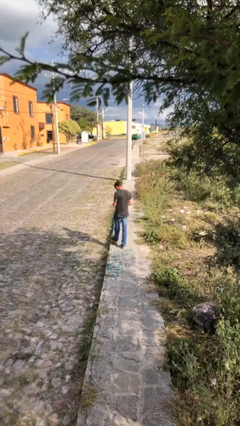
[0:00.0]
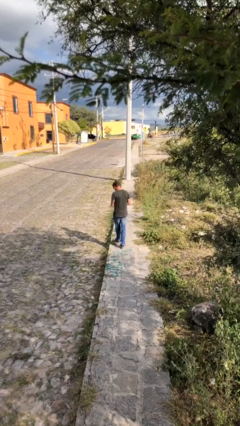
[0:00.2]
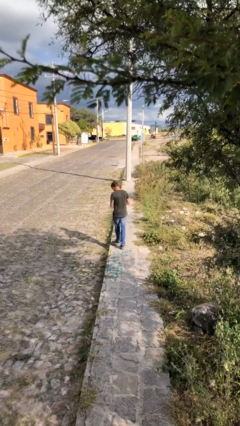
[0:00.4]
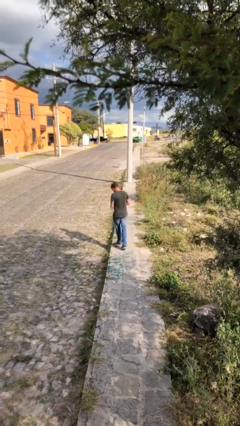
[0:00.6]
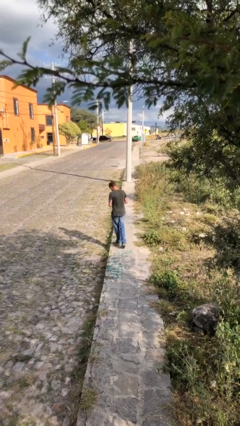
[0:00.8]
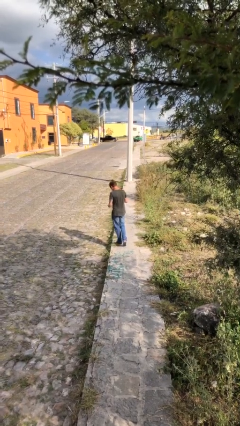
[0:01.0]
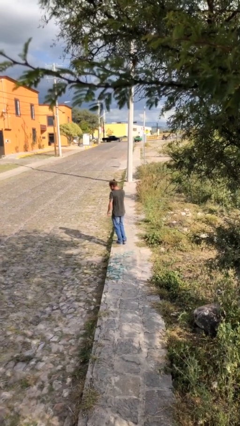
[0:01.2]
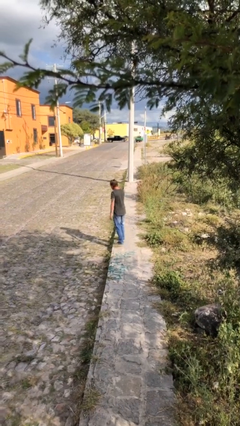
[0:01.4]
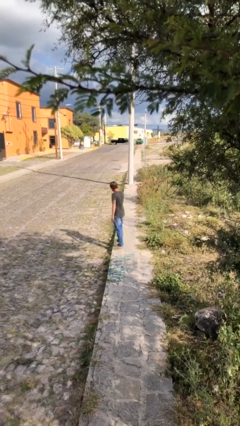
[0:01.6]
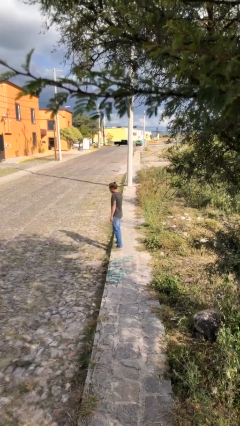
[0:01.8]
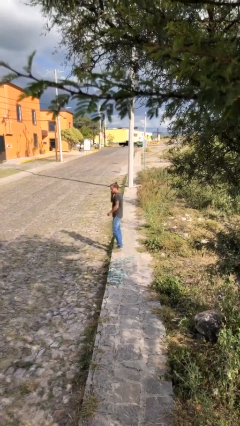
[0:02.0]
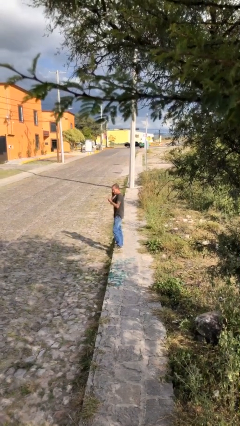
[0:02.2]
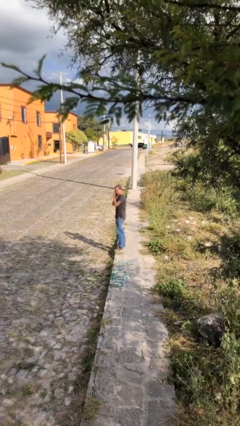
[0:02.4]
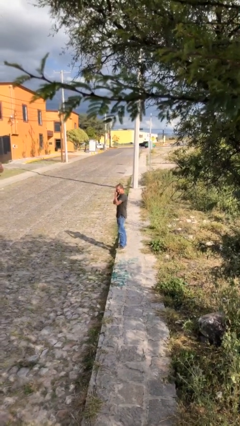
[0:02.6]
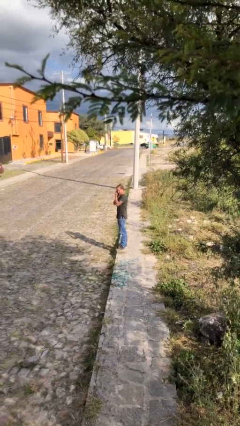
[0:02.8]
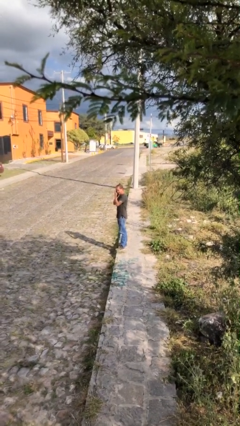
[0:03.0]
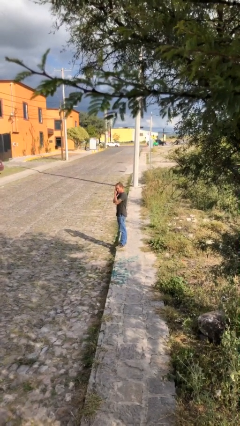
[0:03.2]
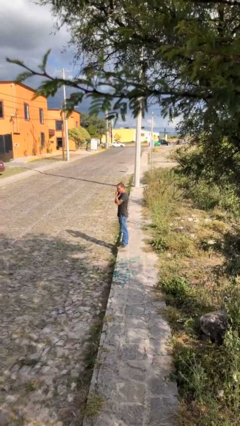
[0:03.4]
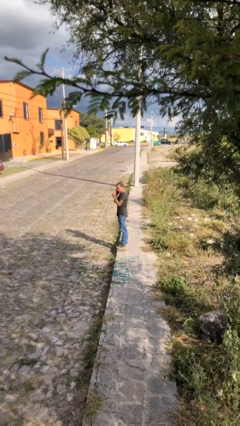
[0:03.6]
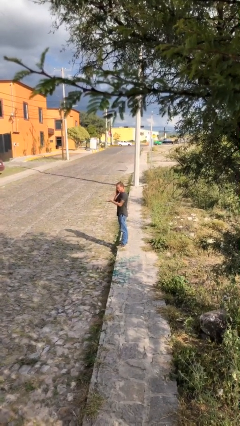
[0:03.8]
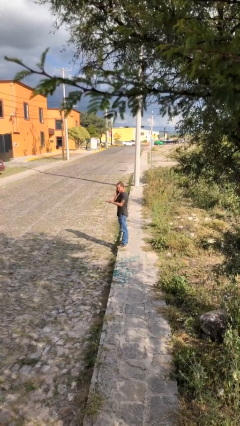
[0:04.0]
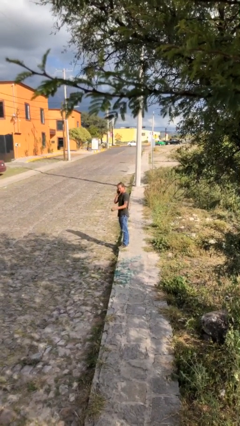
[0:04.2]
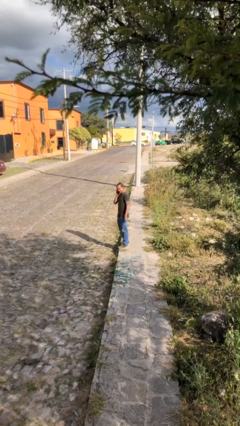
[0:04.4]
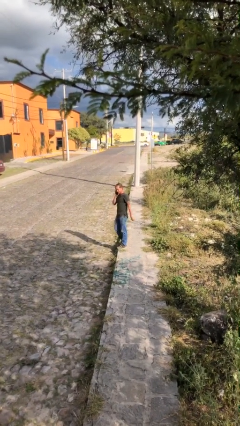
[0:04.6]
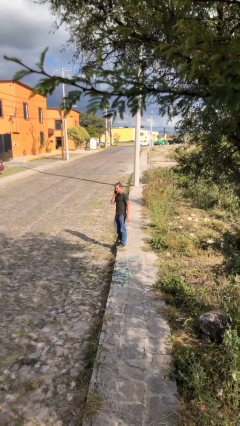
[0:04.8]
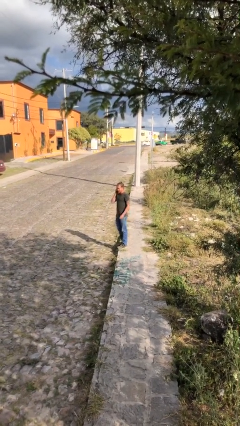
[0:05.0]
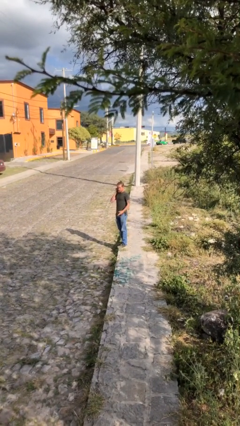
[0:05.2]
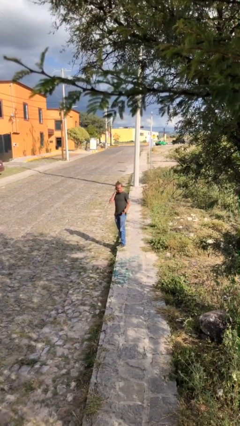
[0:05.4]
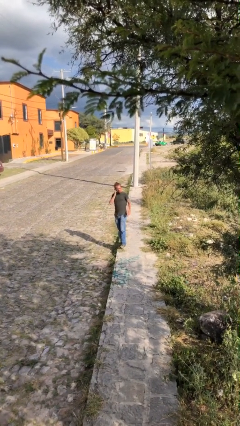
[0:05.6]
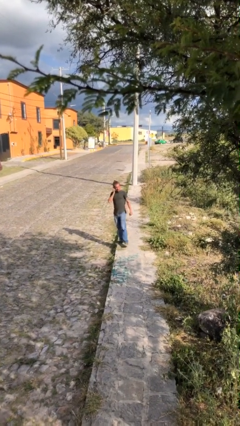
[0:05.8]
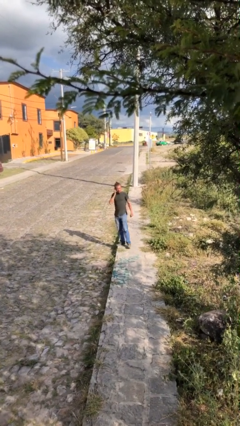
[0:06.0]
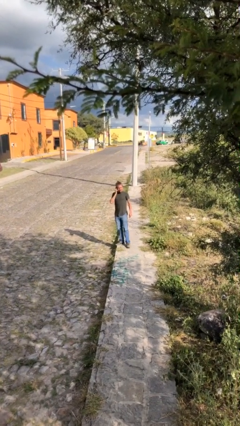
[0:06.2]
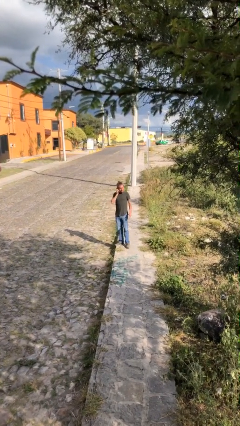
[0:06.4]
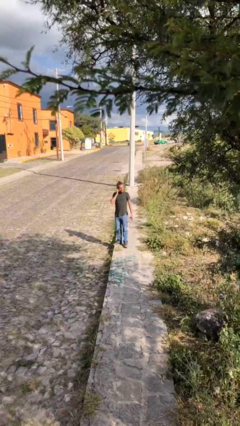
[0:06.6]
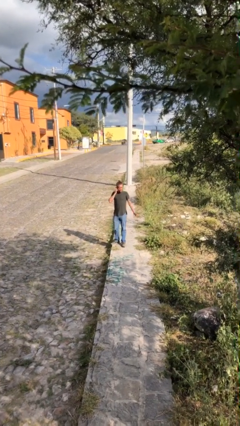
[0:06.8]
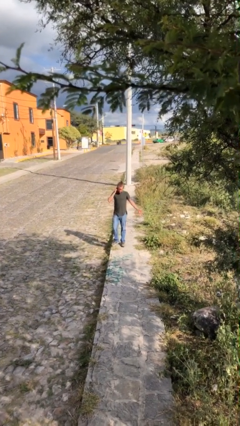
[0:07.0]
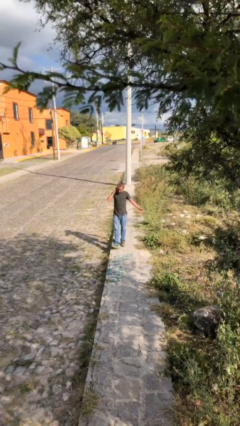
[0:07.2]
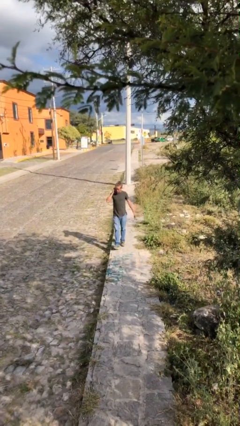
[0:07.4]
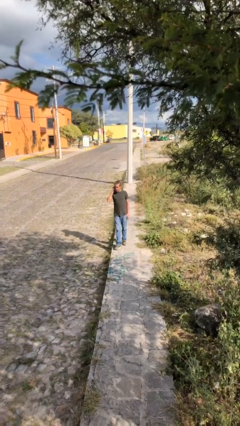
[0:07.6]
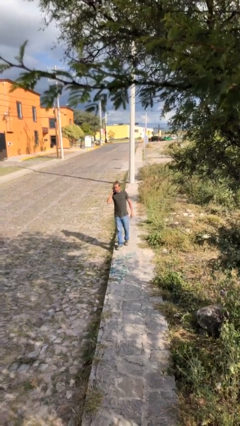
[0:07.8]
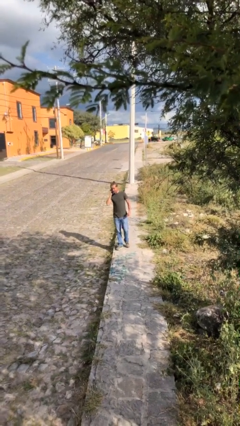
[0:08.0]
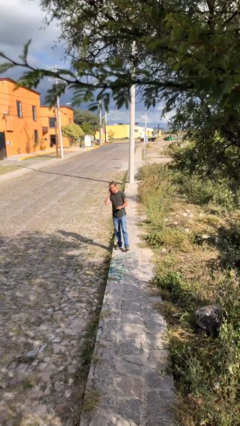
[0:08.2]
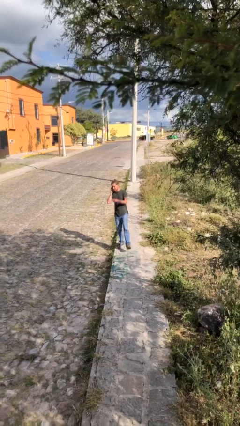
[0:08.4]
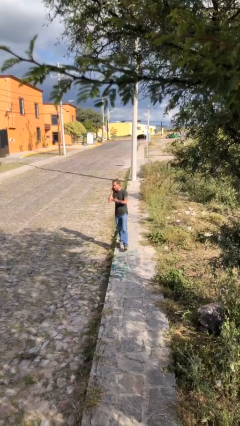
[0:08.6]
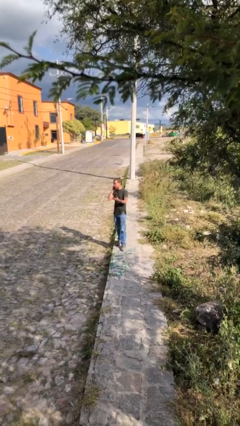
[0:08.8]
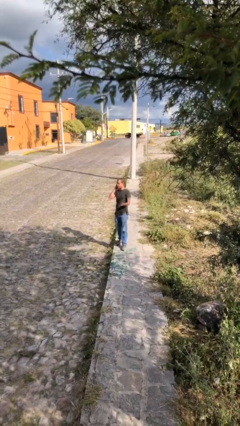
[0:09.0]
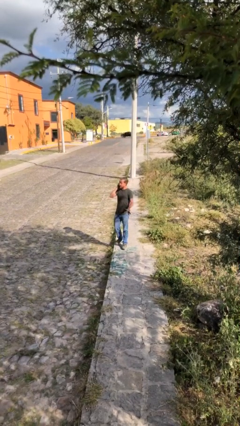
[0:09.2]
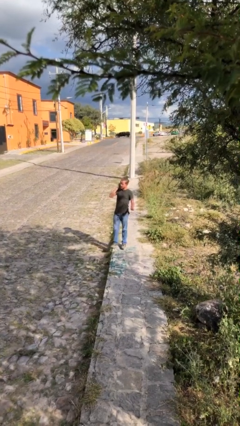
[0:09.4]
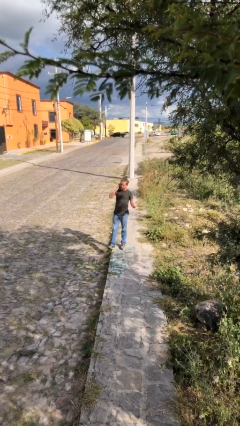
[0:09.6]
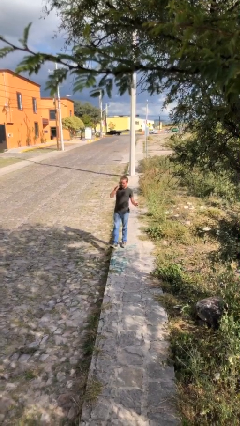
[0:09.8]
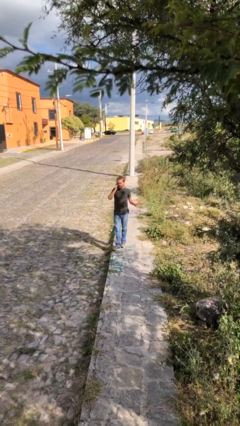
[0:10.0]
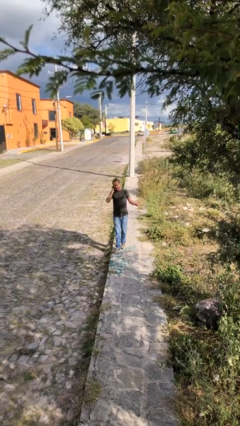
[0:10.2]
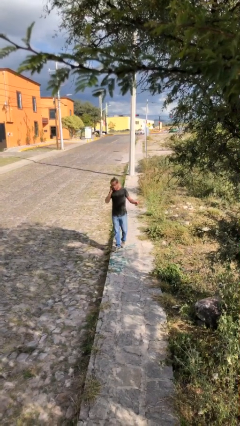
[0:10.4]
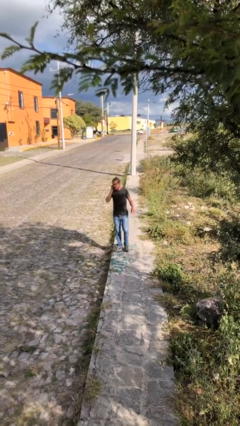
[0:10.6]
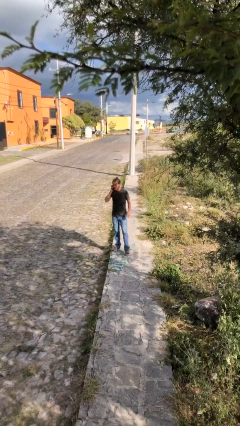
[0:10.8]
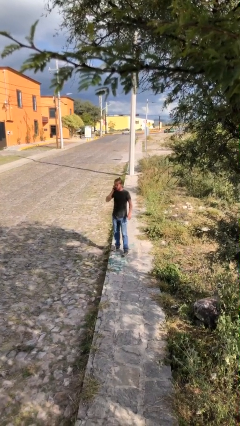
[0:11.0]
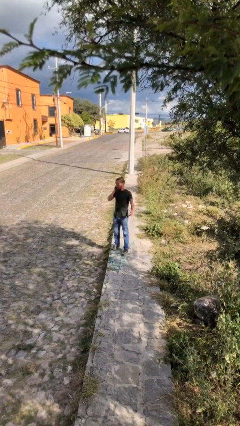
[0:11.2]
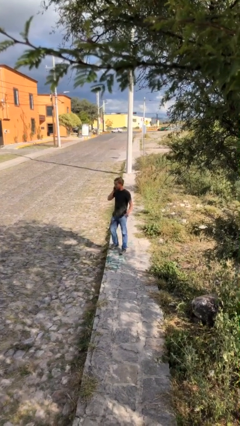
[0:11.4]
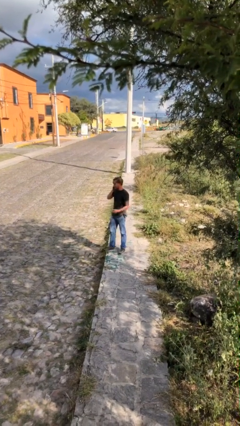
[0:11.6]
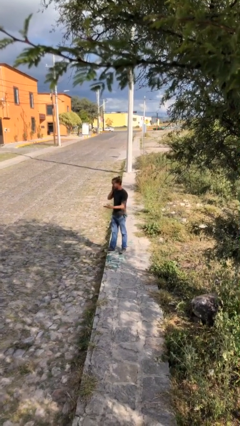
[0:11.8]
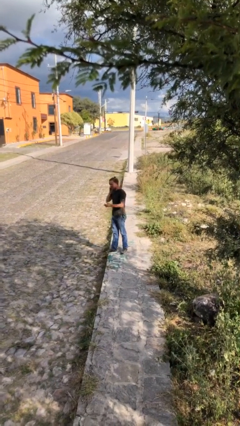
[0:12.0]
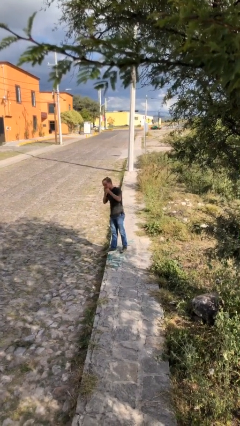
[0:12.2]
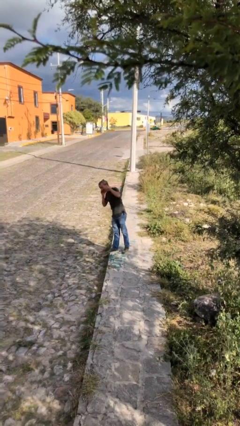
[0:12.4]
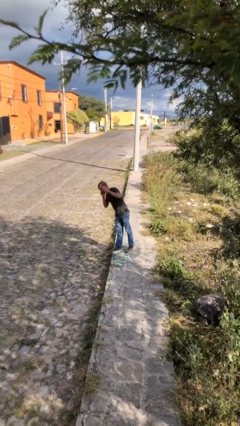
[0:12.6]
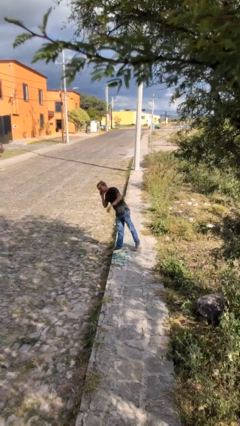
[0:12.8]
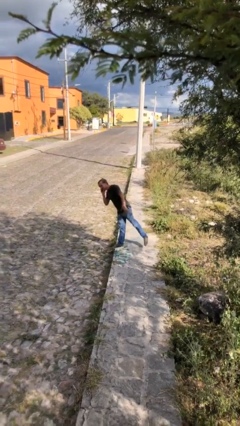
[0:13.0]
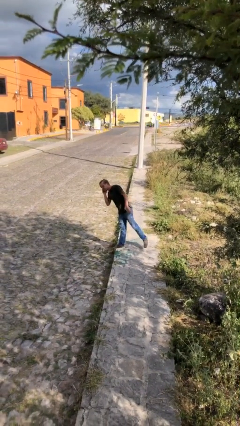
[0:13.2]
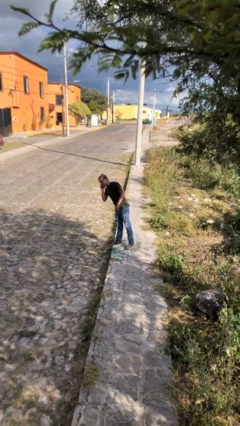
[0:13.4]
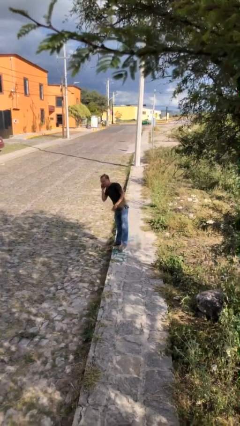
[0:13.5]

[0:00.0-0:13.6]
person talks on phone

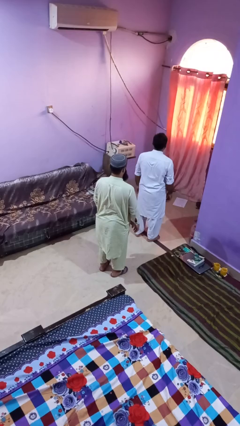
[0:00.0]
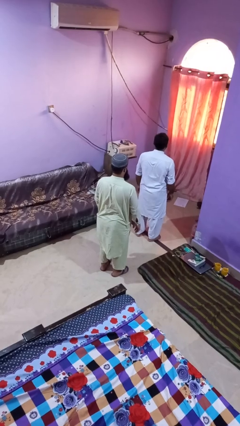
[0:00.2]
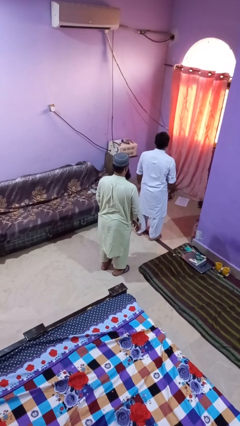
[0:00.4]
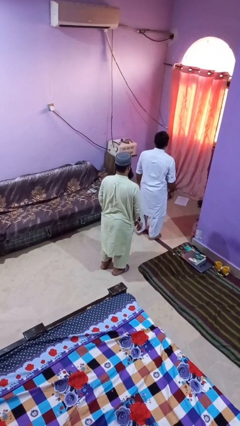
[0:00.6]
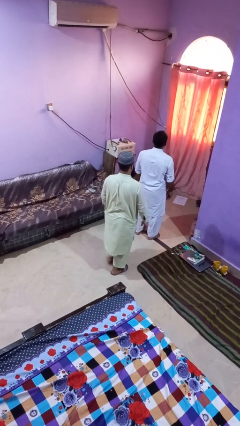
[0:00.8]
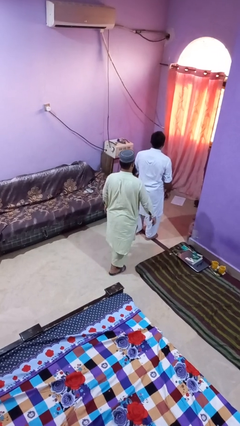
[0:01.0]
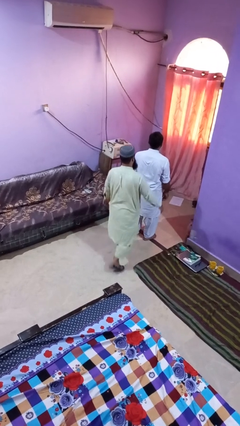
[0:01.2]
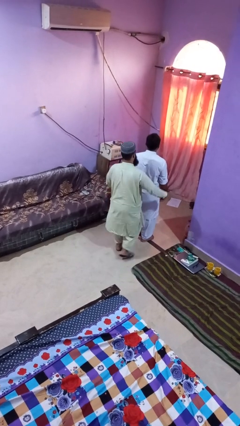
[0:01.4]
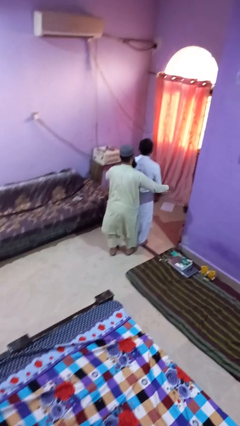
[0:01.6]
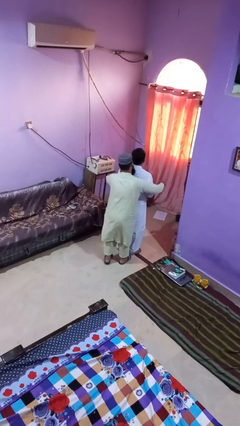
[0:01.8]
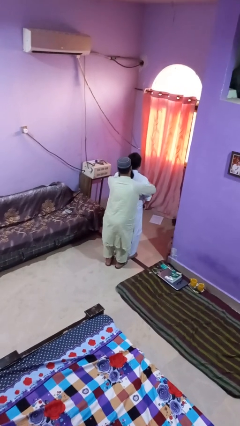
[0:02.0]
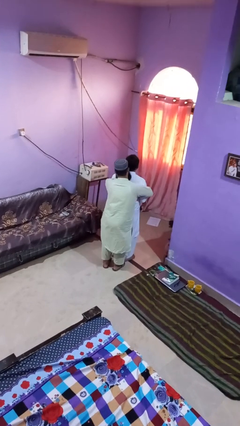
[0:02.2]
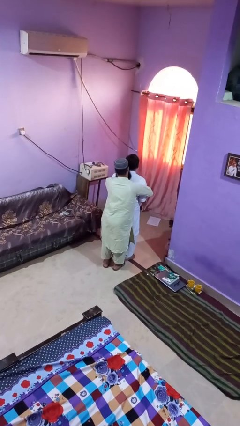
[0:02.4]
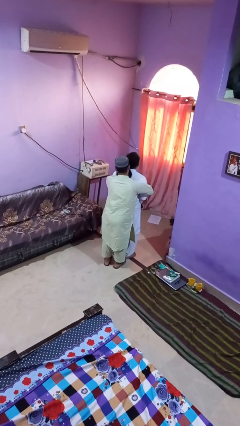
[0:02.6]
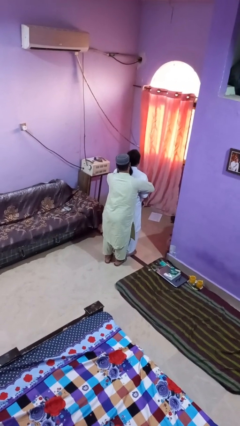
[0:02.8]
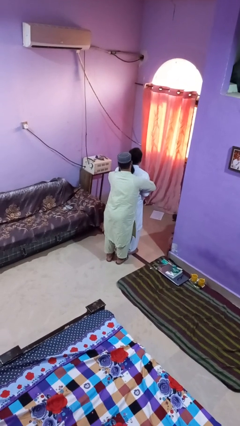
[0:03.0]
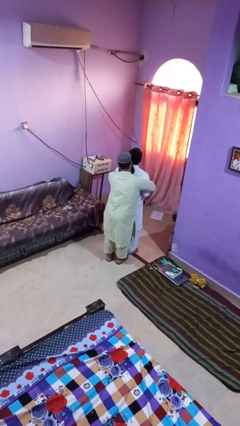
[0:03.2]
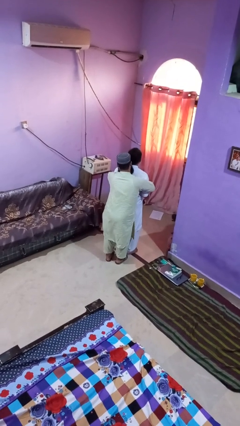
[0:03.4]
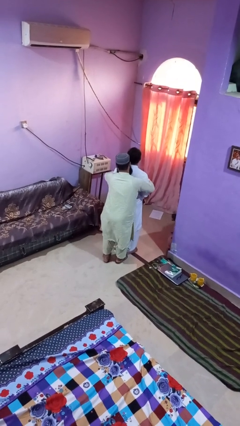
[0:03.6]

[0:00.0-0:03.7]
person hugs person from behind

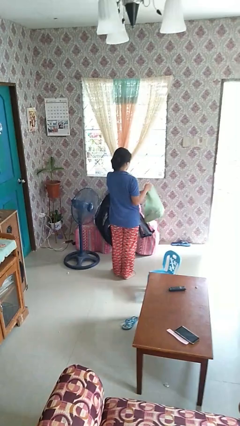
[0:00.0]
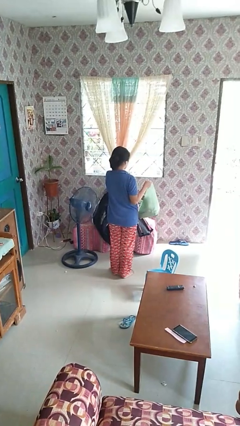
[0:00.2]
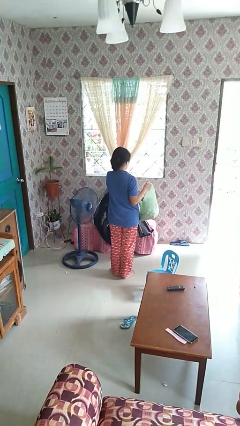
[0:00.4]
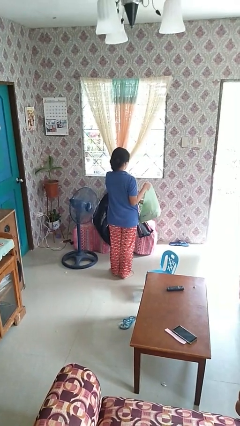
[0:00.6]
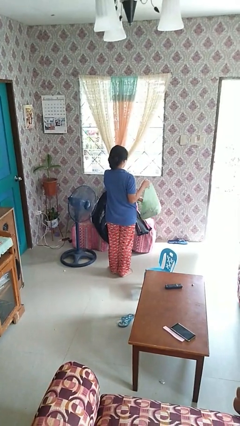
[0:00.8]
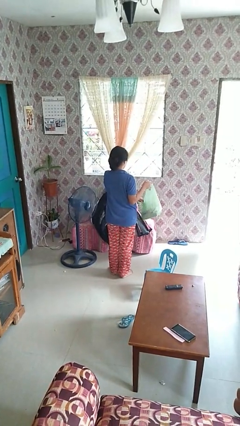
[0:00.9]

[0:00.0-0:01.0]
person puts object into bag
